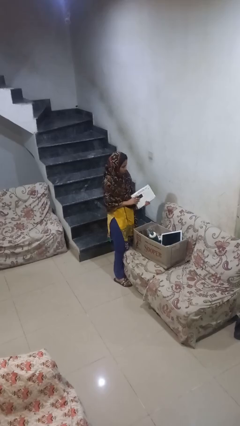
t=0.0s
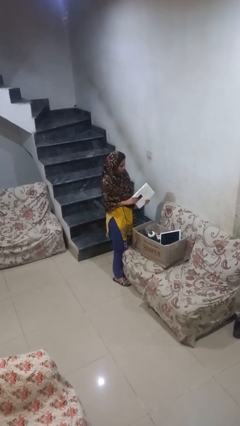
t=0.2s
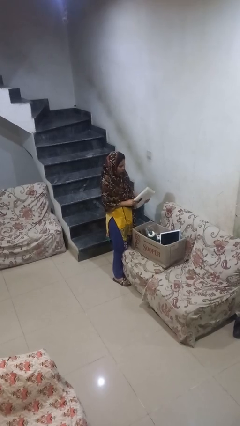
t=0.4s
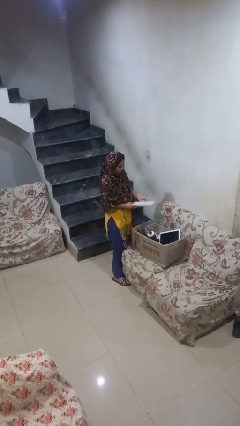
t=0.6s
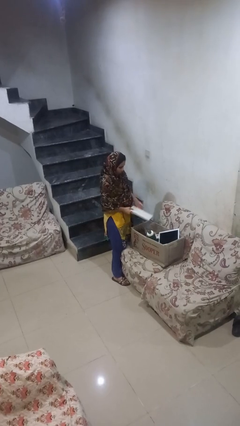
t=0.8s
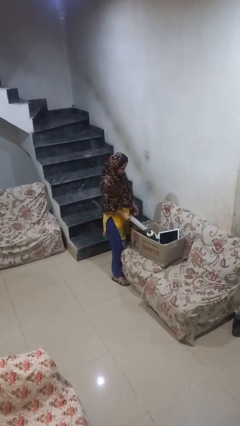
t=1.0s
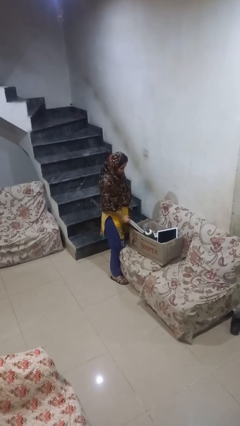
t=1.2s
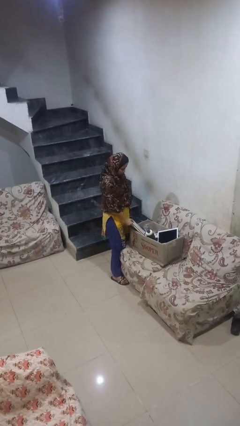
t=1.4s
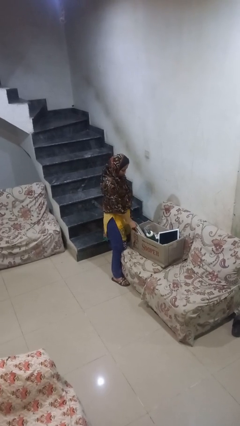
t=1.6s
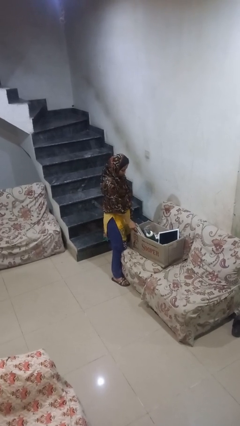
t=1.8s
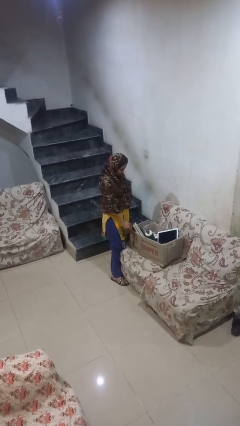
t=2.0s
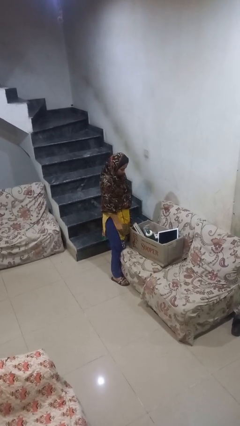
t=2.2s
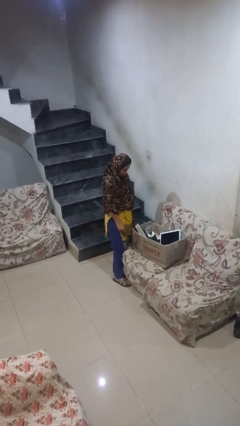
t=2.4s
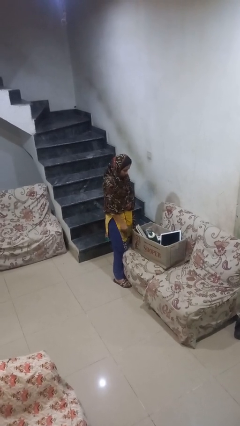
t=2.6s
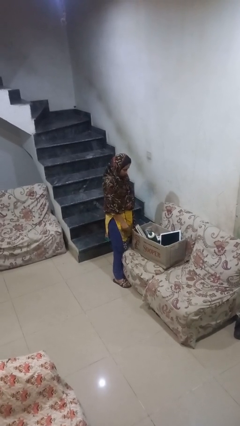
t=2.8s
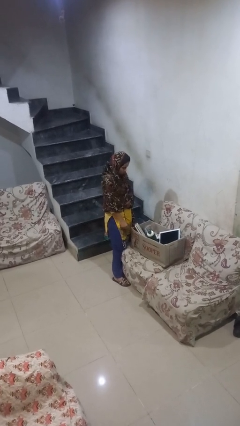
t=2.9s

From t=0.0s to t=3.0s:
person puts object into box

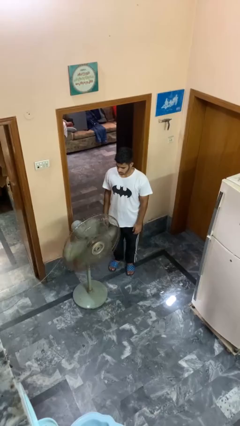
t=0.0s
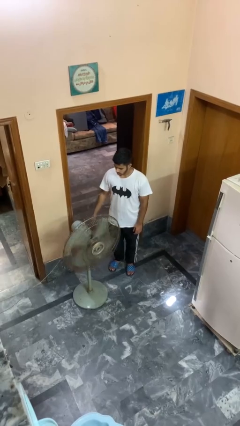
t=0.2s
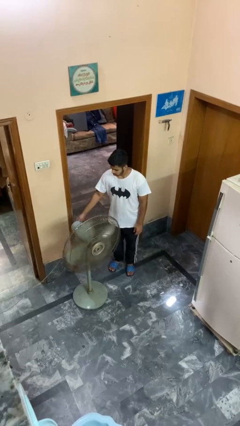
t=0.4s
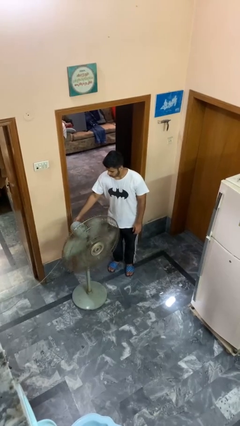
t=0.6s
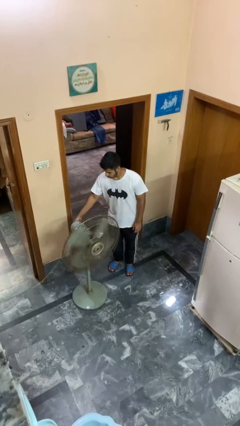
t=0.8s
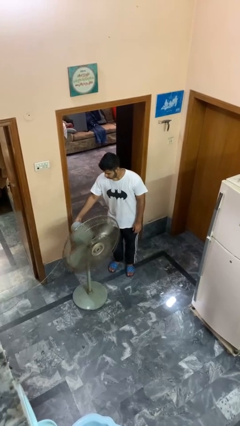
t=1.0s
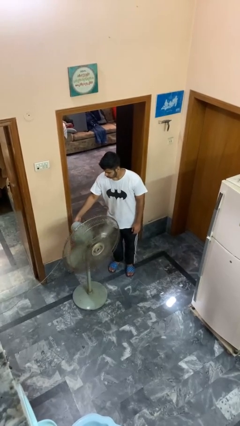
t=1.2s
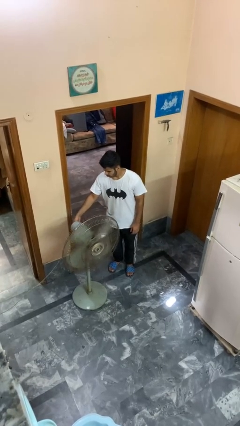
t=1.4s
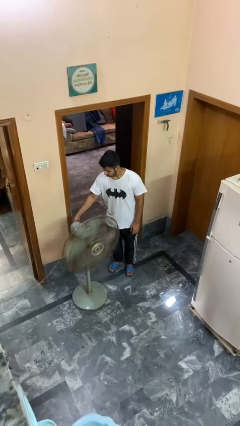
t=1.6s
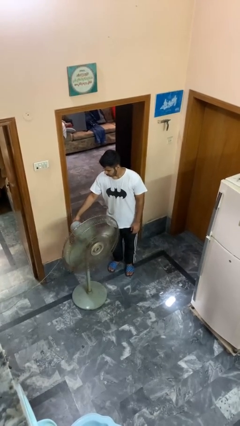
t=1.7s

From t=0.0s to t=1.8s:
person turns on fan

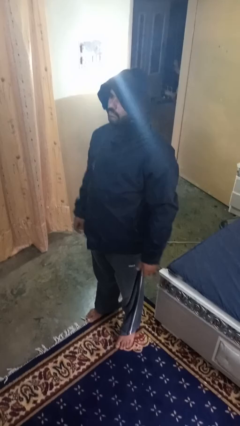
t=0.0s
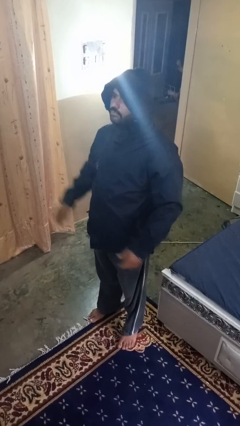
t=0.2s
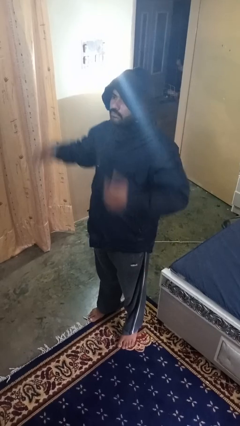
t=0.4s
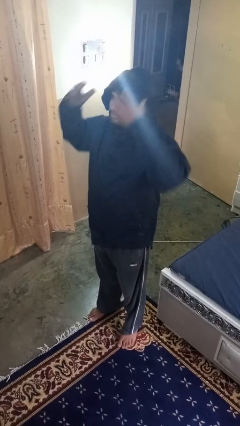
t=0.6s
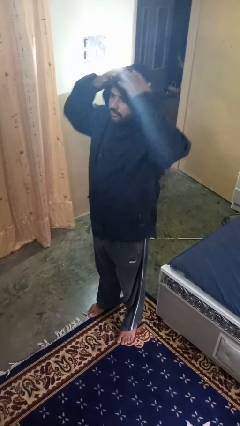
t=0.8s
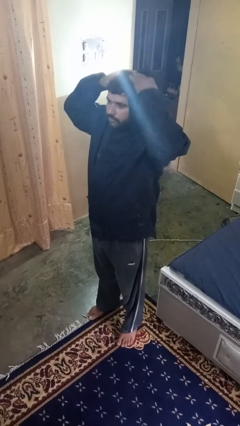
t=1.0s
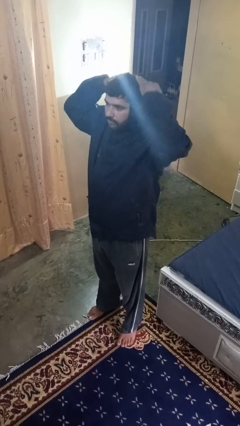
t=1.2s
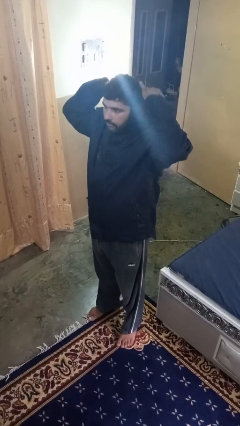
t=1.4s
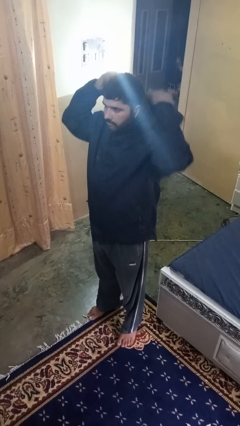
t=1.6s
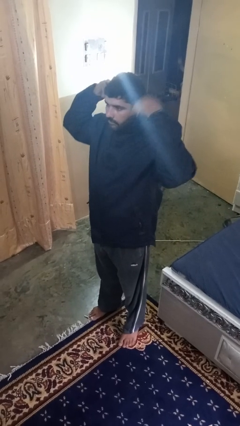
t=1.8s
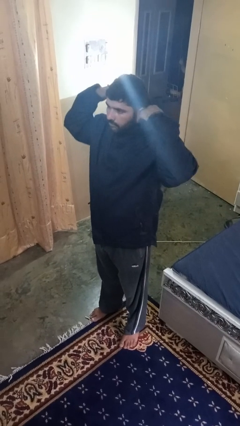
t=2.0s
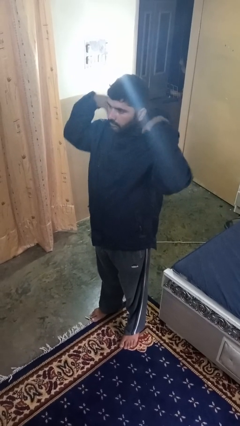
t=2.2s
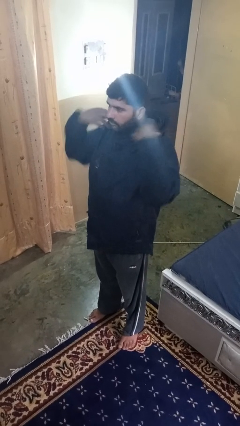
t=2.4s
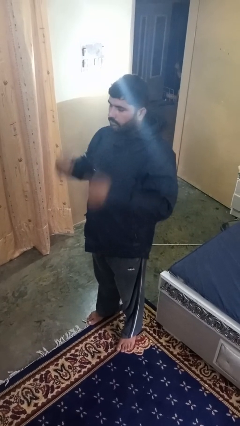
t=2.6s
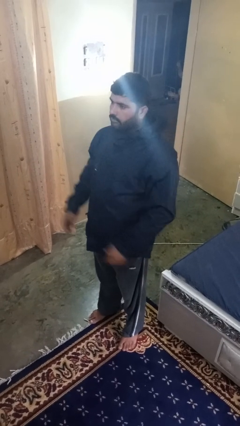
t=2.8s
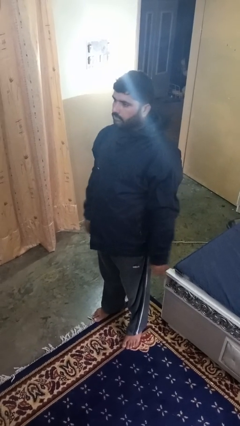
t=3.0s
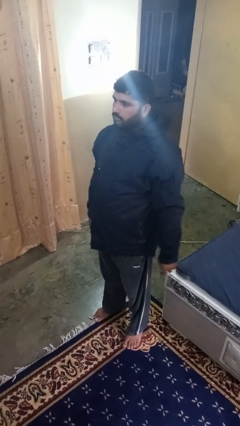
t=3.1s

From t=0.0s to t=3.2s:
person takes off hoodie

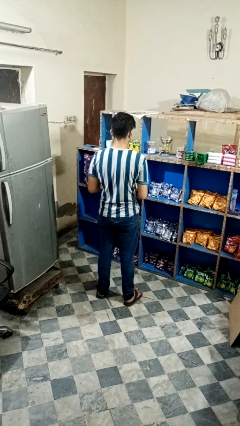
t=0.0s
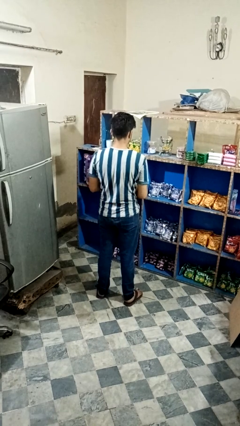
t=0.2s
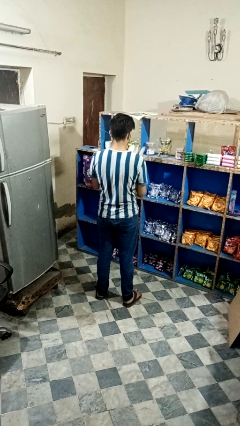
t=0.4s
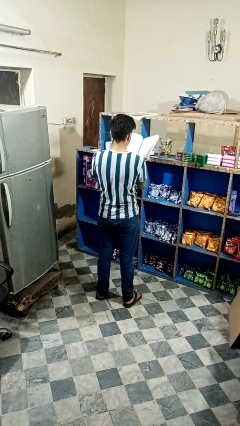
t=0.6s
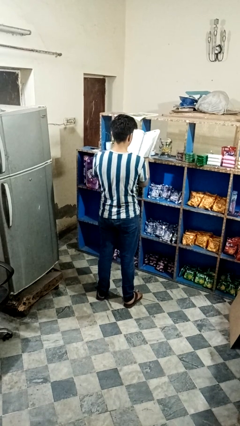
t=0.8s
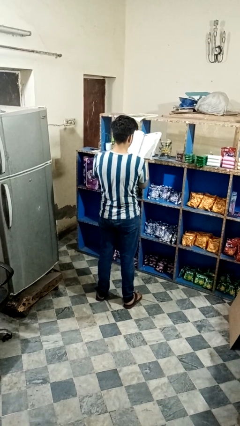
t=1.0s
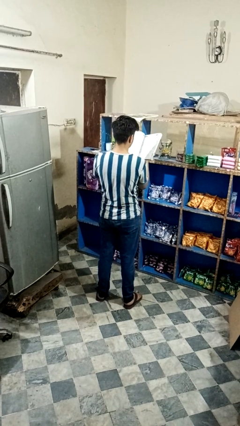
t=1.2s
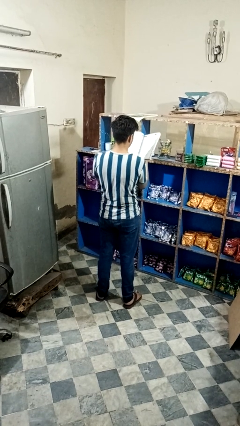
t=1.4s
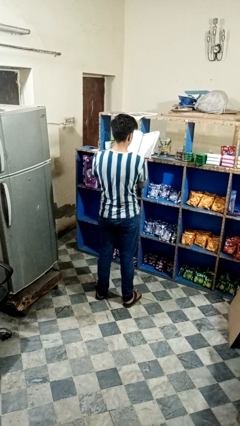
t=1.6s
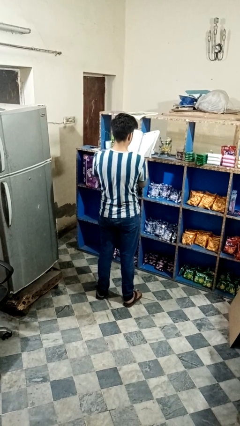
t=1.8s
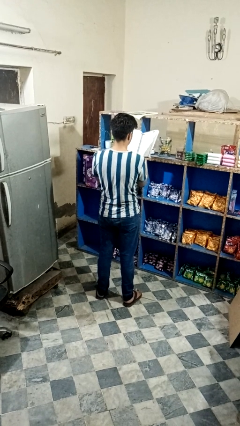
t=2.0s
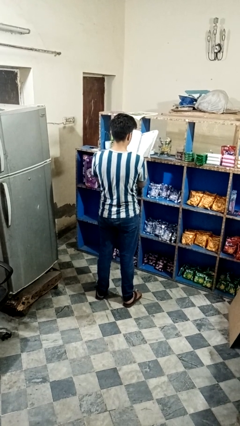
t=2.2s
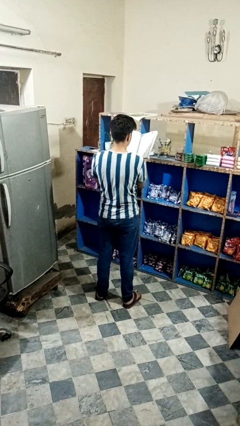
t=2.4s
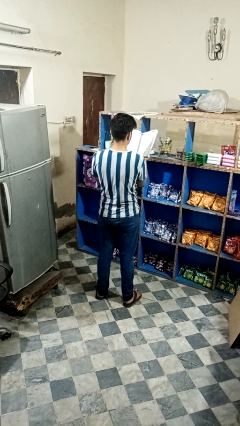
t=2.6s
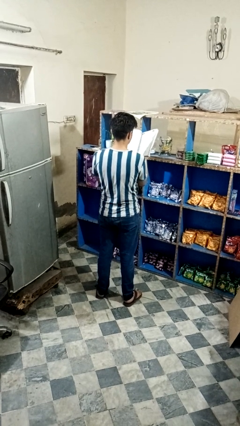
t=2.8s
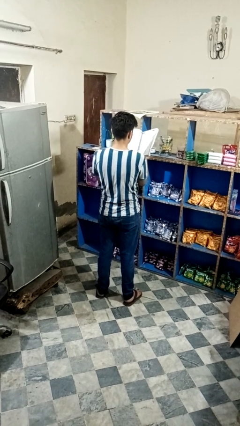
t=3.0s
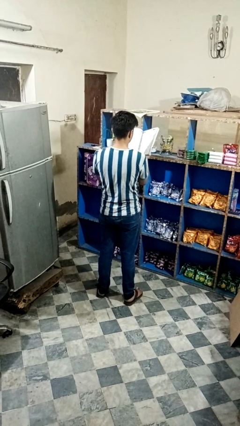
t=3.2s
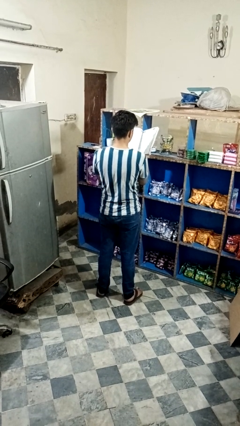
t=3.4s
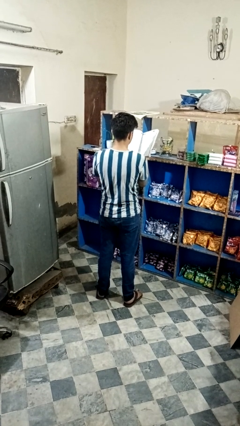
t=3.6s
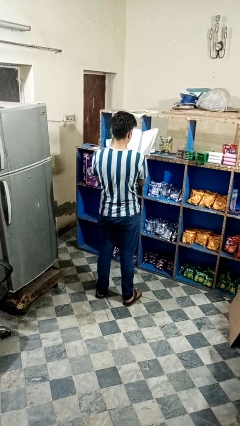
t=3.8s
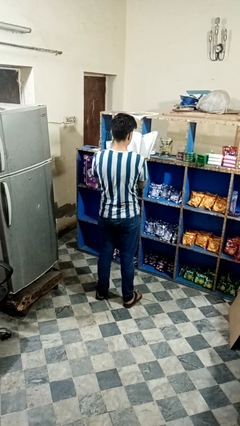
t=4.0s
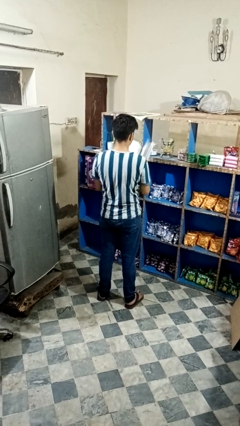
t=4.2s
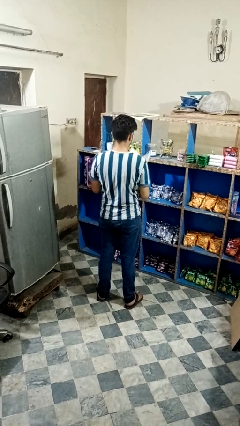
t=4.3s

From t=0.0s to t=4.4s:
person reads book

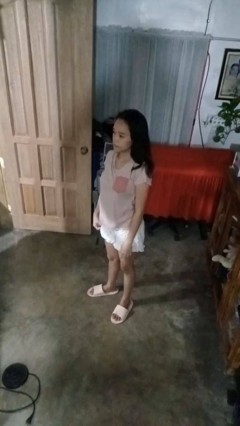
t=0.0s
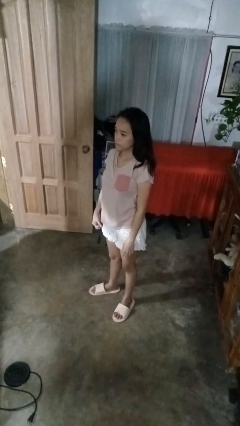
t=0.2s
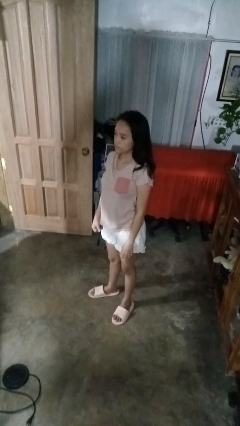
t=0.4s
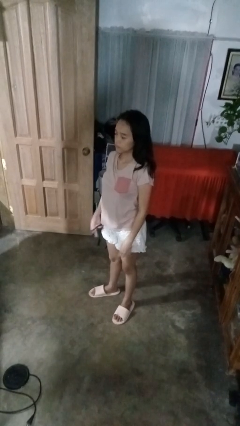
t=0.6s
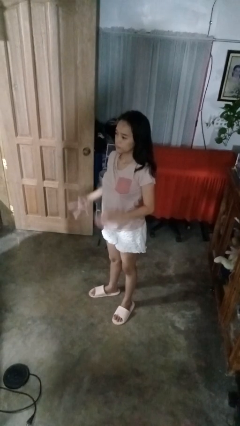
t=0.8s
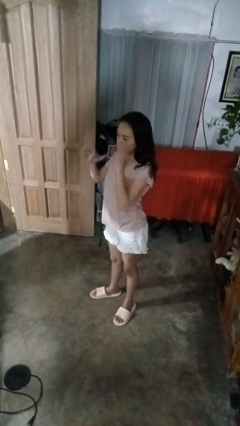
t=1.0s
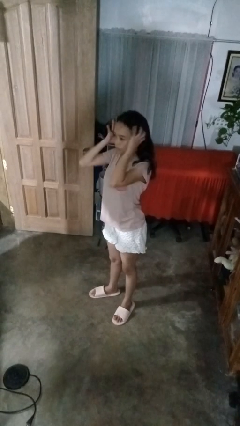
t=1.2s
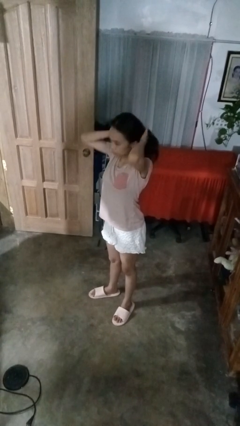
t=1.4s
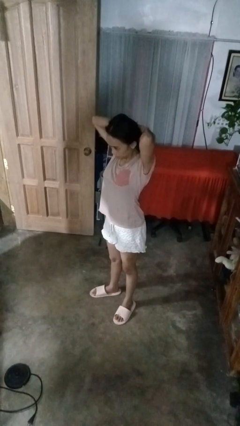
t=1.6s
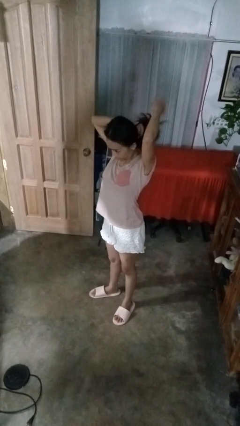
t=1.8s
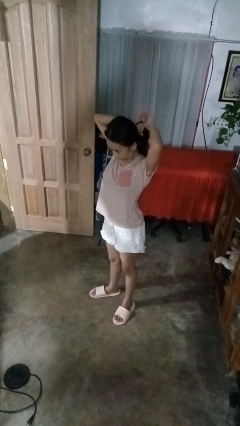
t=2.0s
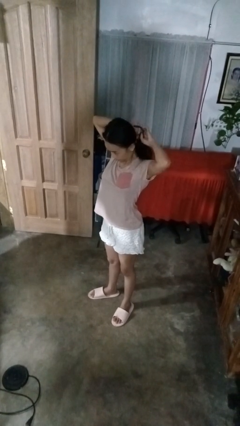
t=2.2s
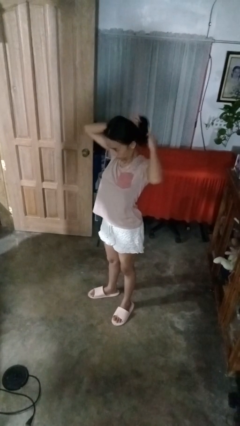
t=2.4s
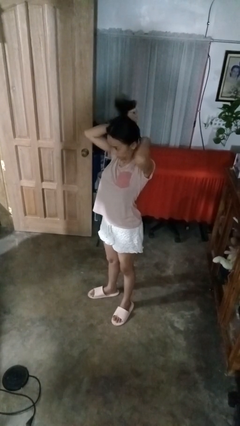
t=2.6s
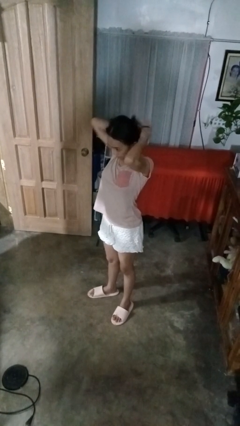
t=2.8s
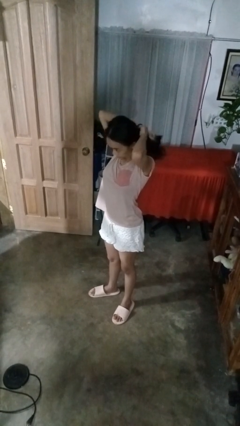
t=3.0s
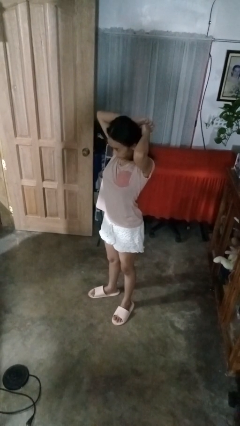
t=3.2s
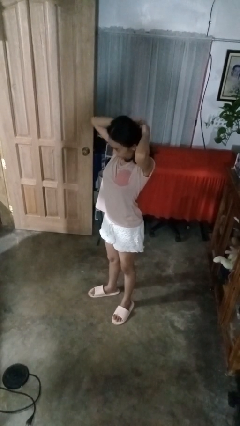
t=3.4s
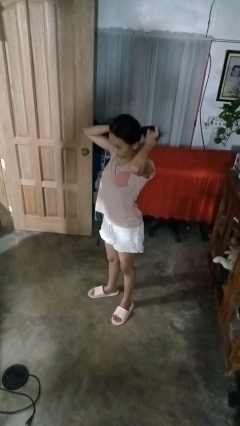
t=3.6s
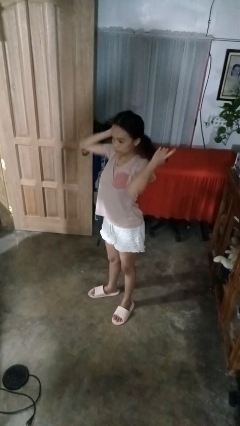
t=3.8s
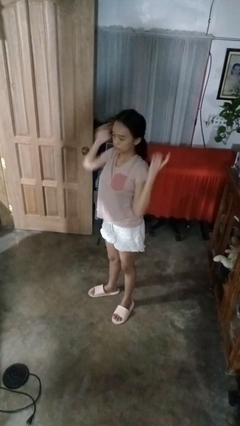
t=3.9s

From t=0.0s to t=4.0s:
person puts hair in ponytail

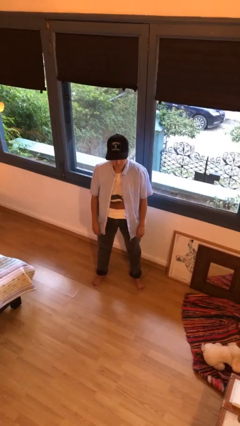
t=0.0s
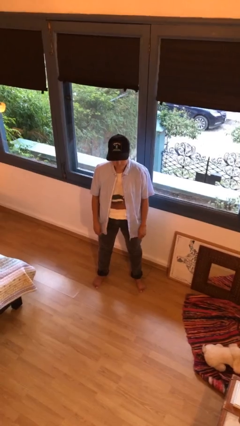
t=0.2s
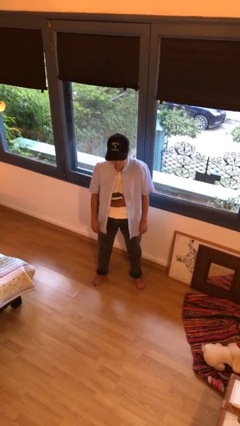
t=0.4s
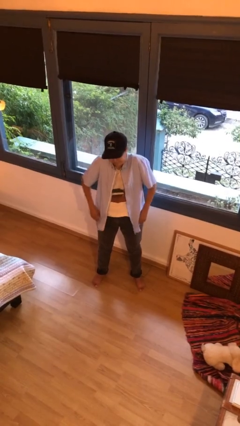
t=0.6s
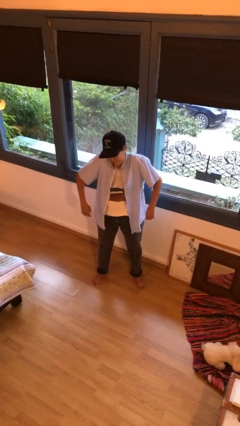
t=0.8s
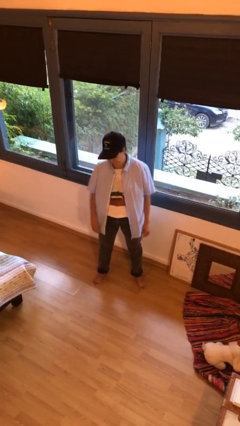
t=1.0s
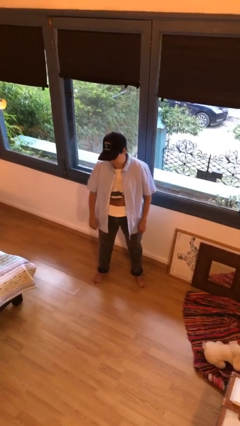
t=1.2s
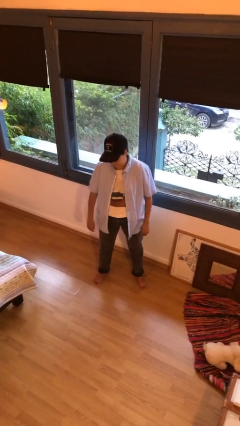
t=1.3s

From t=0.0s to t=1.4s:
person shrugs
